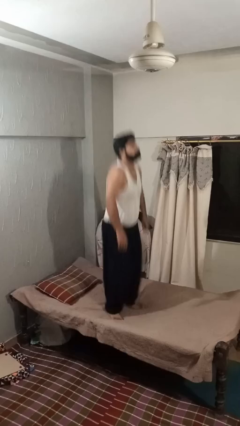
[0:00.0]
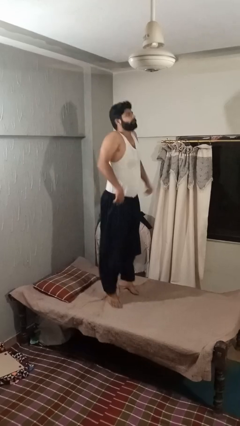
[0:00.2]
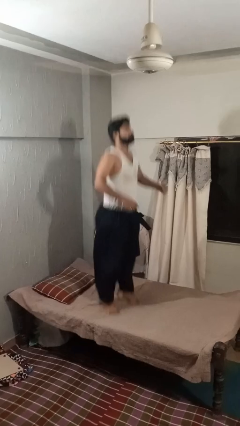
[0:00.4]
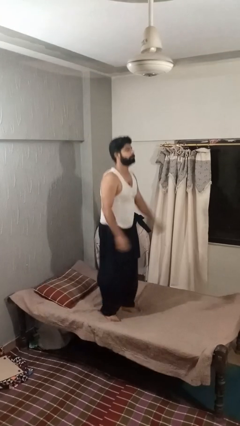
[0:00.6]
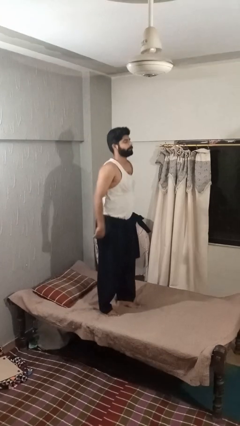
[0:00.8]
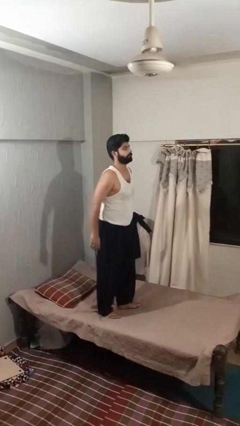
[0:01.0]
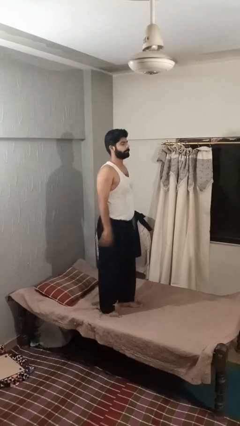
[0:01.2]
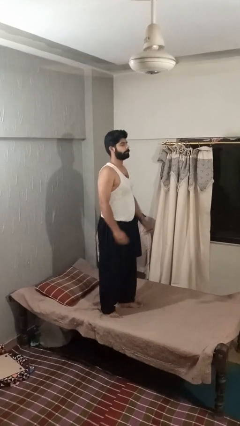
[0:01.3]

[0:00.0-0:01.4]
person jumps on bed

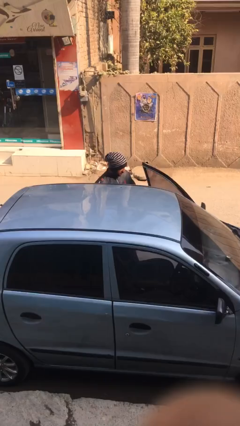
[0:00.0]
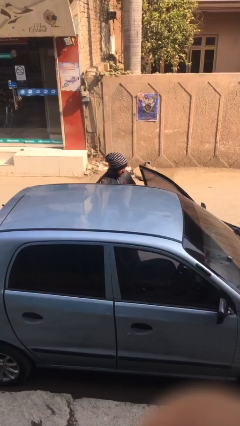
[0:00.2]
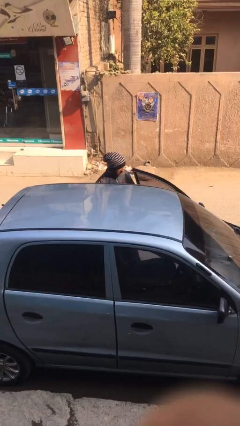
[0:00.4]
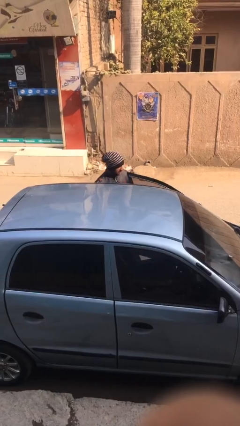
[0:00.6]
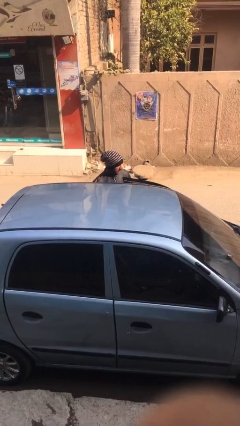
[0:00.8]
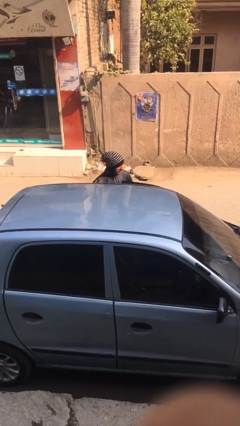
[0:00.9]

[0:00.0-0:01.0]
person closes car door

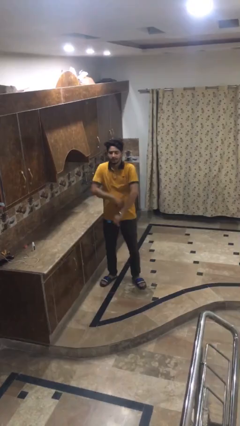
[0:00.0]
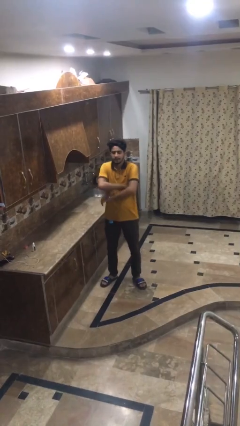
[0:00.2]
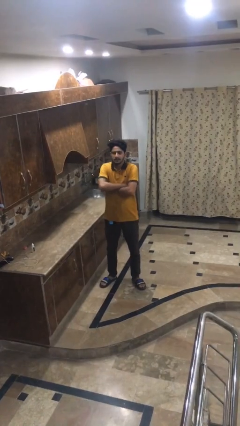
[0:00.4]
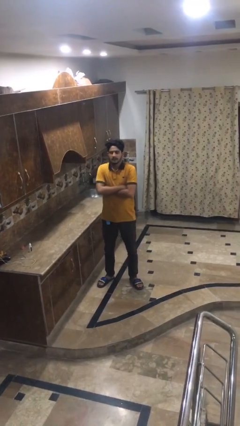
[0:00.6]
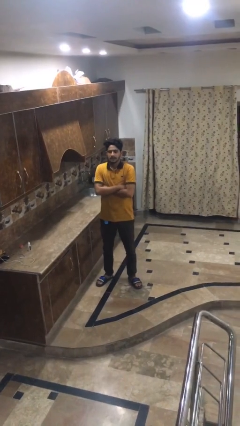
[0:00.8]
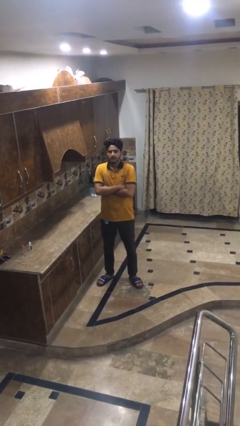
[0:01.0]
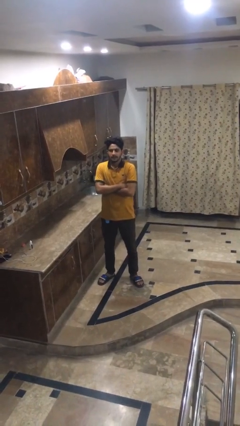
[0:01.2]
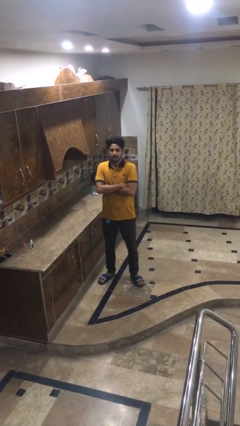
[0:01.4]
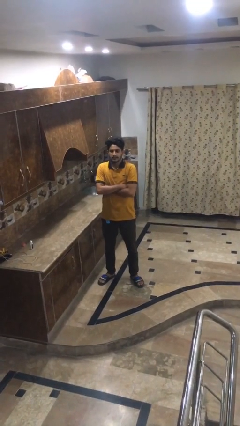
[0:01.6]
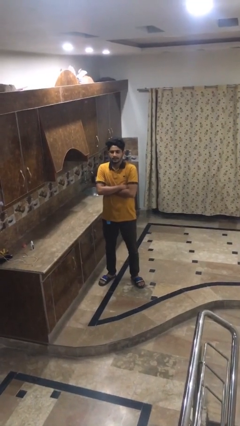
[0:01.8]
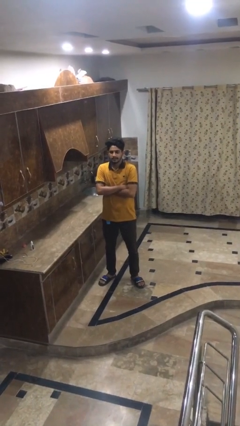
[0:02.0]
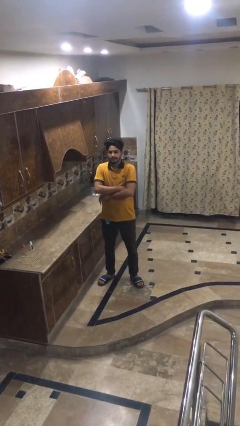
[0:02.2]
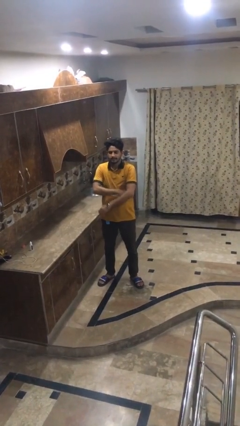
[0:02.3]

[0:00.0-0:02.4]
person crosses arms

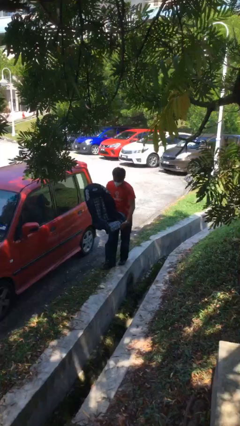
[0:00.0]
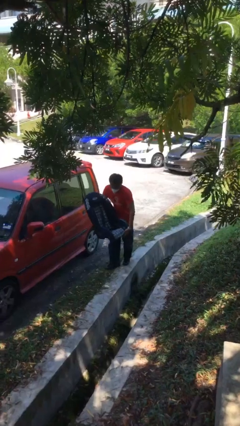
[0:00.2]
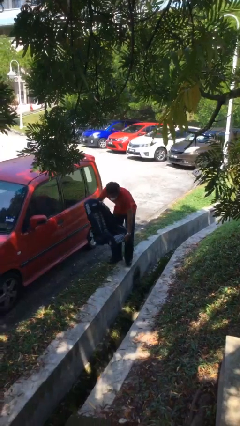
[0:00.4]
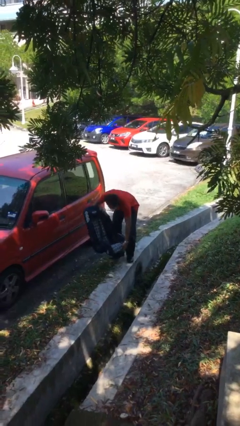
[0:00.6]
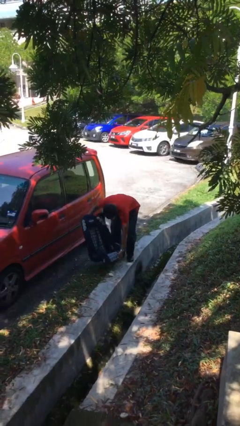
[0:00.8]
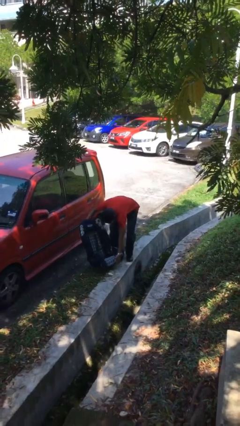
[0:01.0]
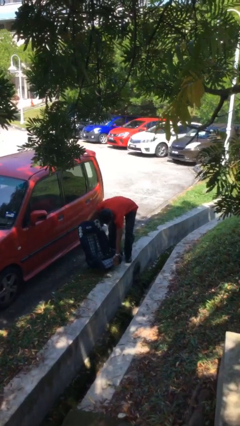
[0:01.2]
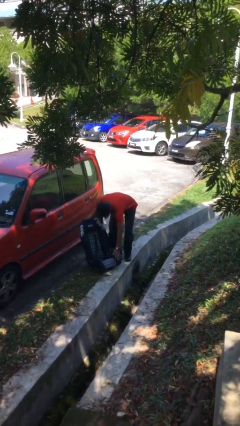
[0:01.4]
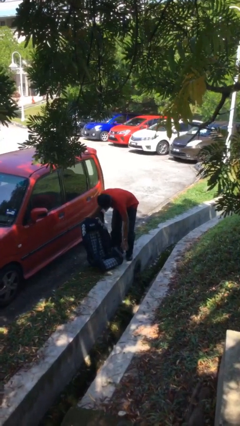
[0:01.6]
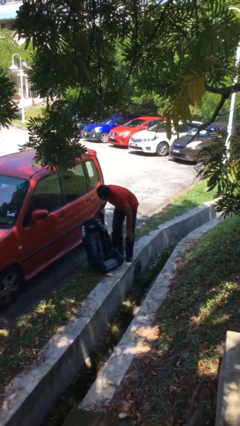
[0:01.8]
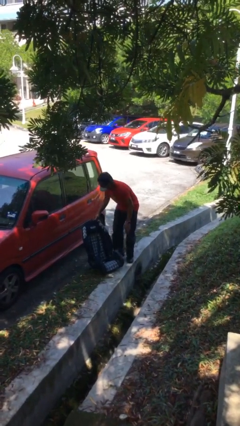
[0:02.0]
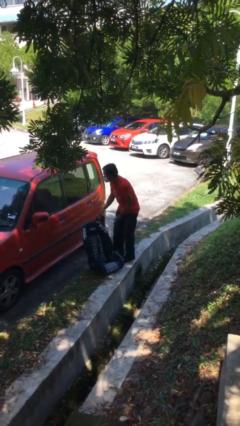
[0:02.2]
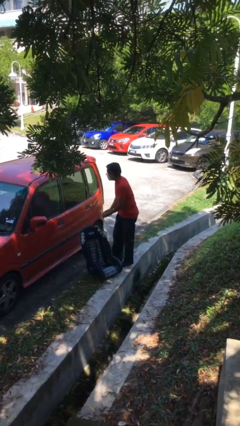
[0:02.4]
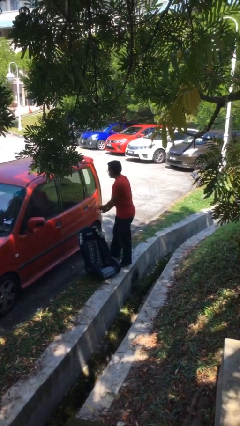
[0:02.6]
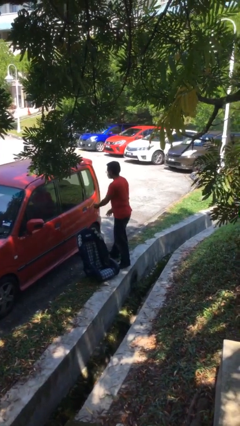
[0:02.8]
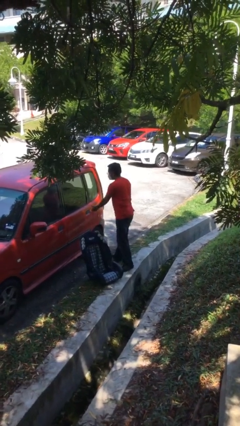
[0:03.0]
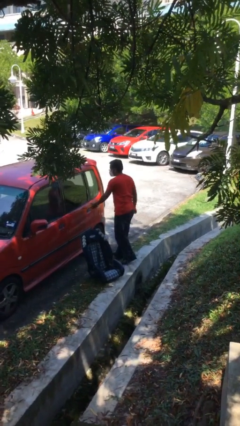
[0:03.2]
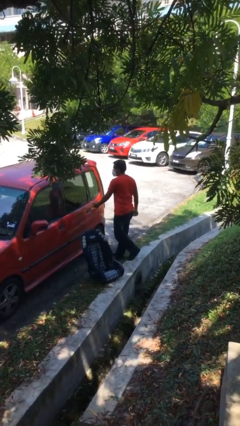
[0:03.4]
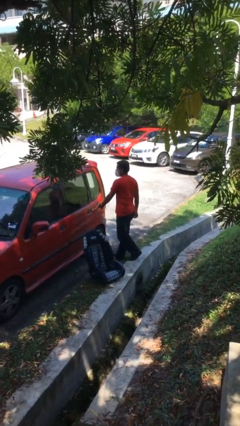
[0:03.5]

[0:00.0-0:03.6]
person puts down object on floor

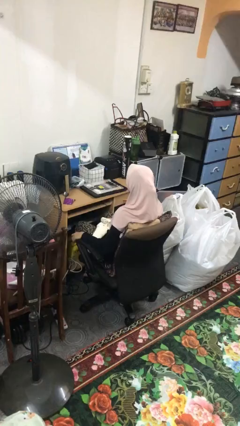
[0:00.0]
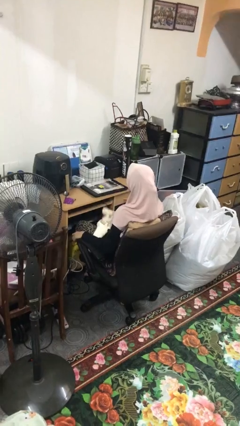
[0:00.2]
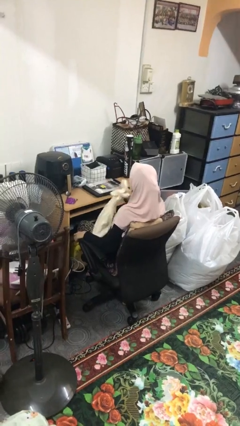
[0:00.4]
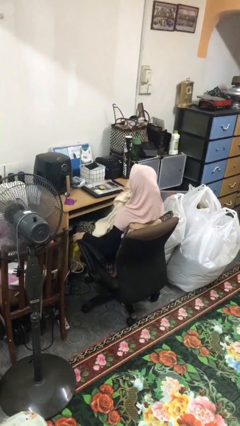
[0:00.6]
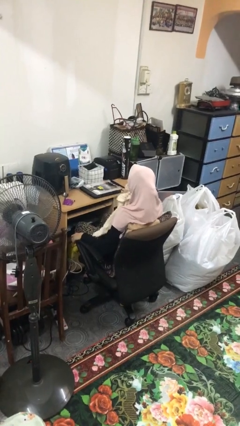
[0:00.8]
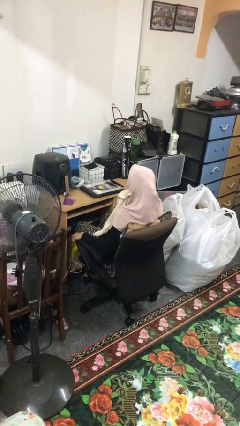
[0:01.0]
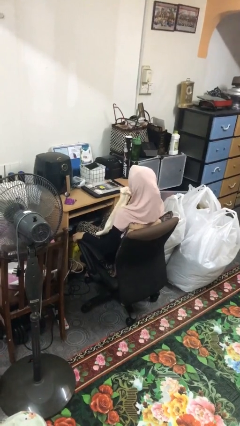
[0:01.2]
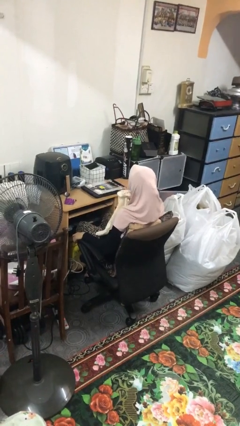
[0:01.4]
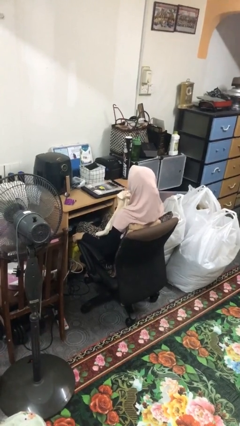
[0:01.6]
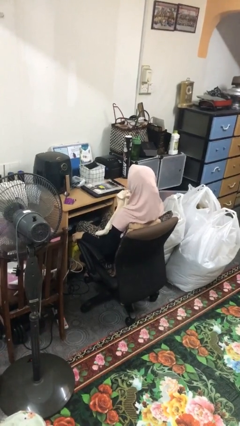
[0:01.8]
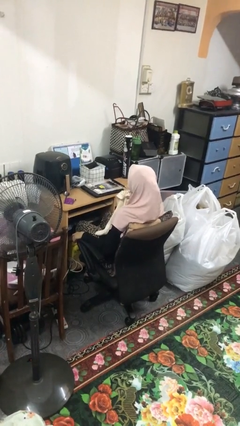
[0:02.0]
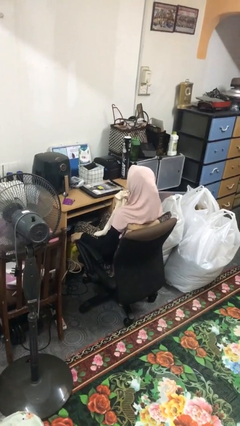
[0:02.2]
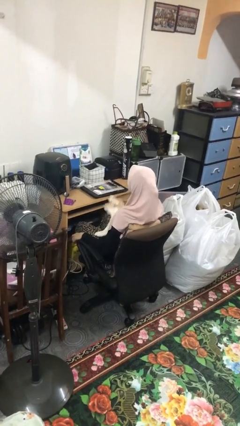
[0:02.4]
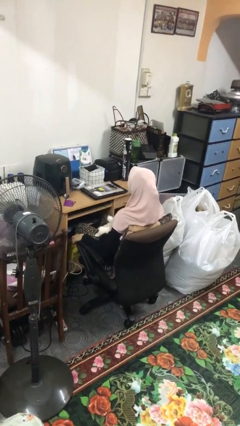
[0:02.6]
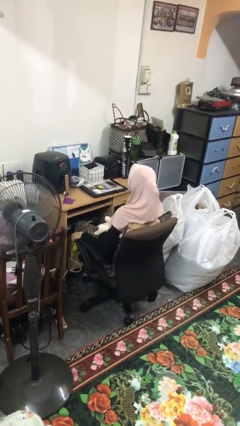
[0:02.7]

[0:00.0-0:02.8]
person wipes mouth with napkin

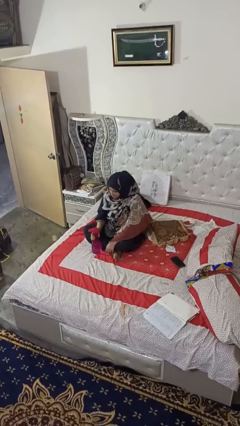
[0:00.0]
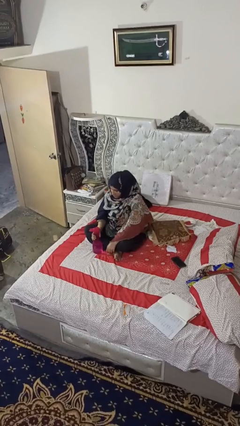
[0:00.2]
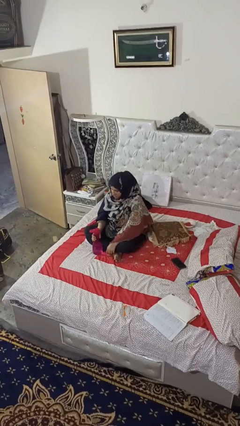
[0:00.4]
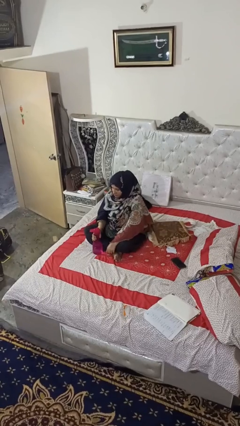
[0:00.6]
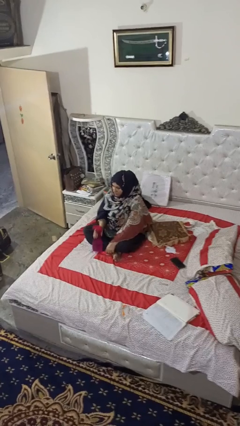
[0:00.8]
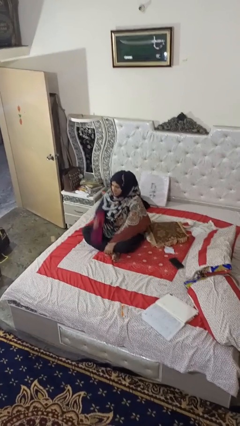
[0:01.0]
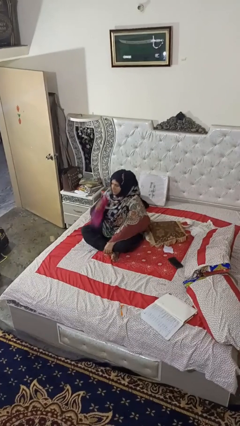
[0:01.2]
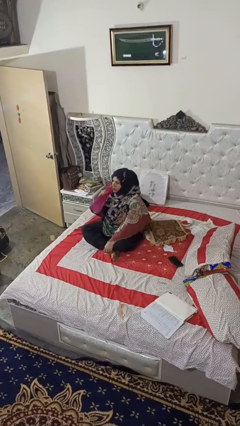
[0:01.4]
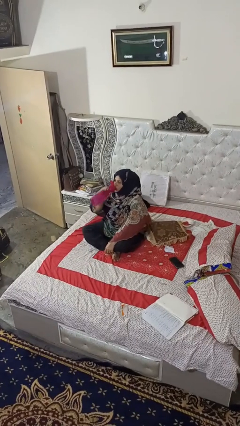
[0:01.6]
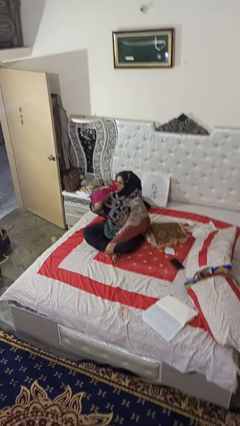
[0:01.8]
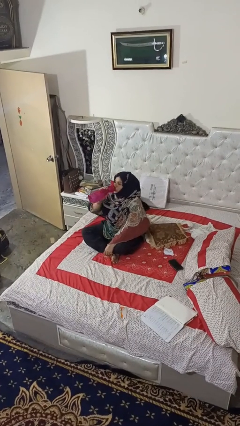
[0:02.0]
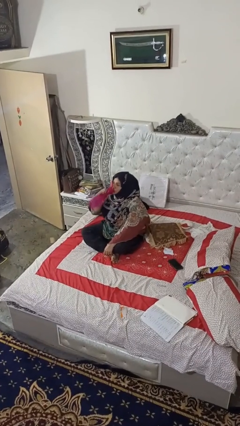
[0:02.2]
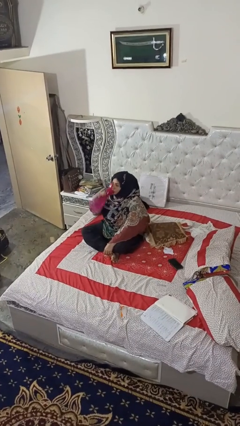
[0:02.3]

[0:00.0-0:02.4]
person drinks from bottle

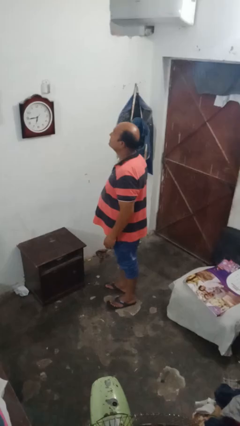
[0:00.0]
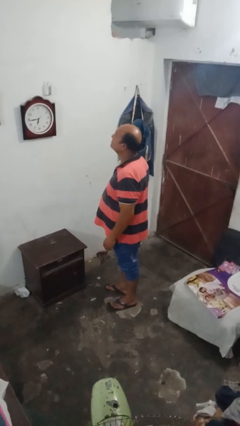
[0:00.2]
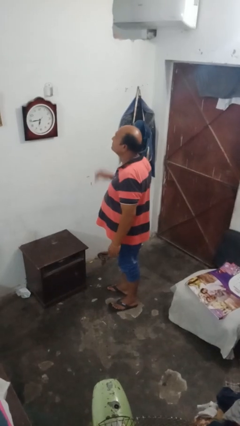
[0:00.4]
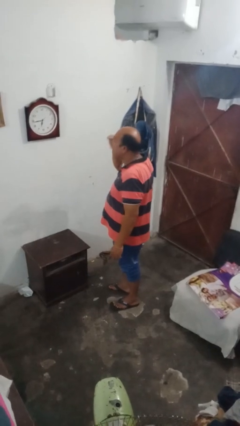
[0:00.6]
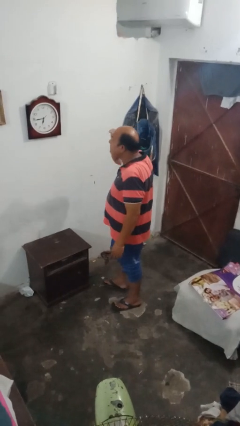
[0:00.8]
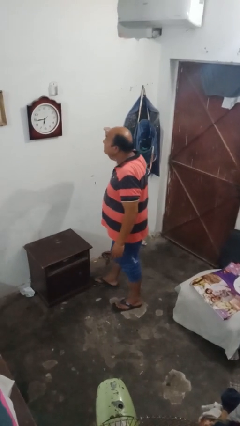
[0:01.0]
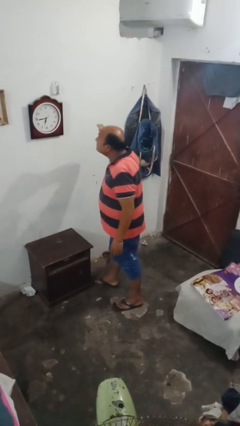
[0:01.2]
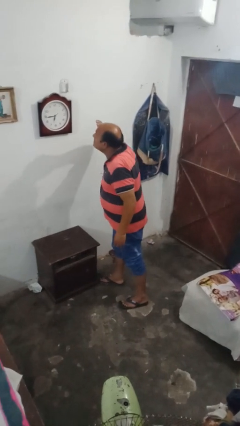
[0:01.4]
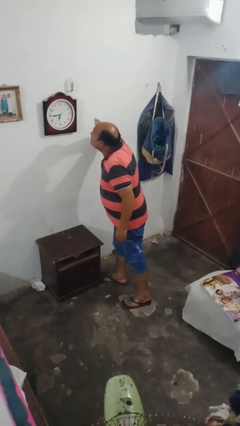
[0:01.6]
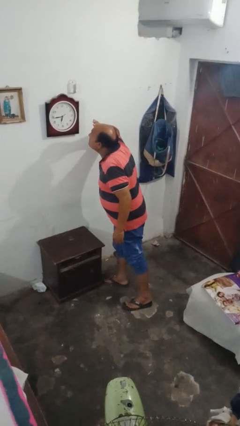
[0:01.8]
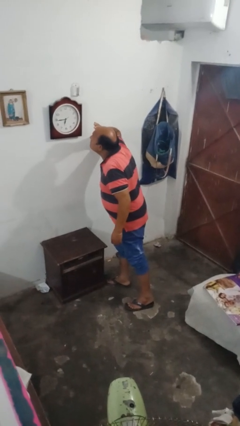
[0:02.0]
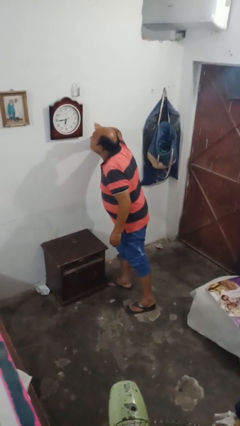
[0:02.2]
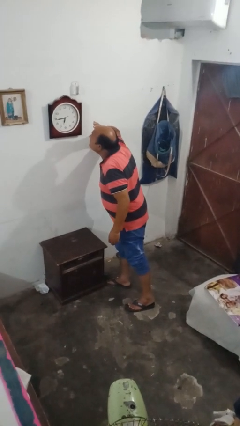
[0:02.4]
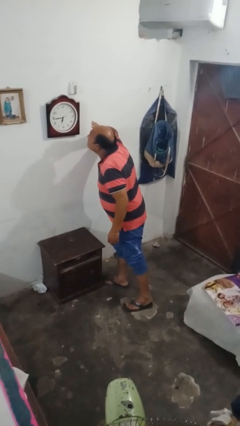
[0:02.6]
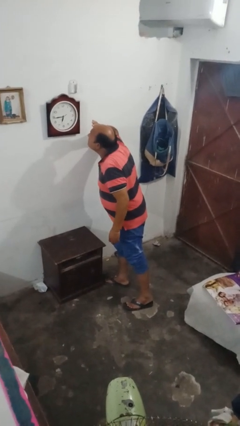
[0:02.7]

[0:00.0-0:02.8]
person gestures watch closely

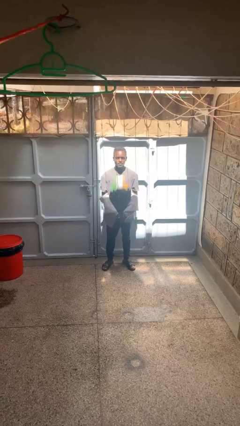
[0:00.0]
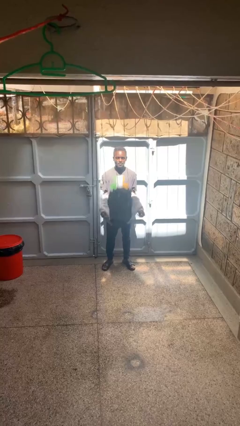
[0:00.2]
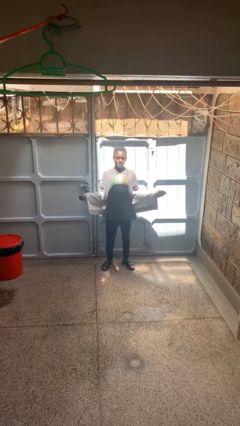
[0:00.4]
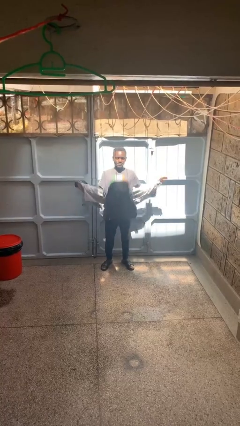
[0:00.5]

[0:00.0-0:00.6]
person puts on hoodie
